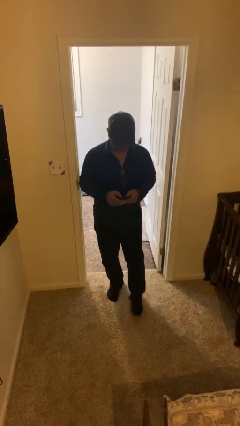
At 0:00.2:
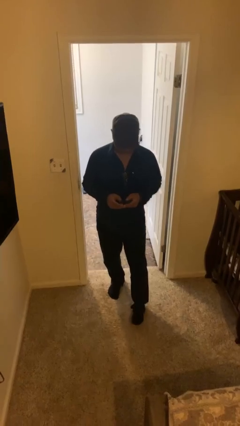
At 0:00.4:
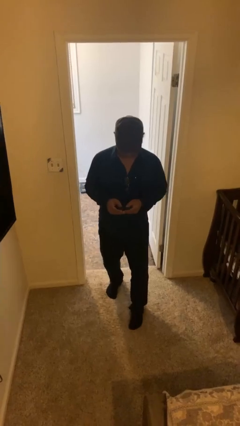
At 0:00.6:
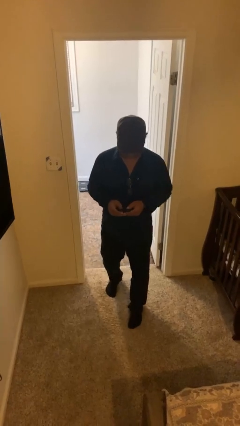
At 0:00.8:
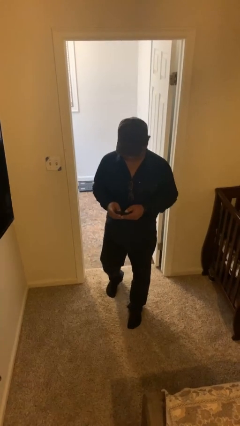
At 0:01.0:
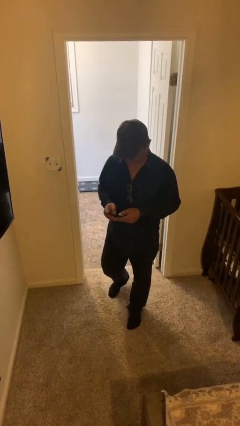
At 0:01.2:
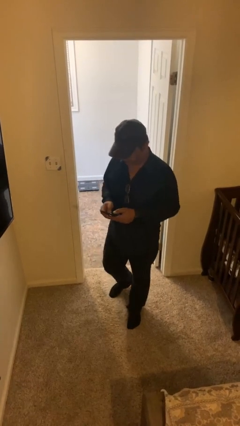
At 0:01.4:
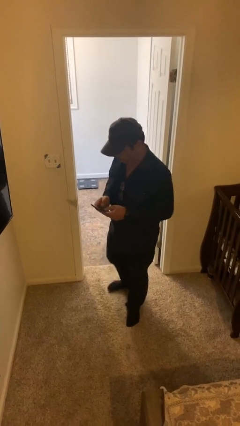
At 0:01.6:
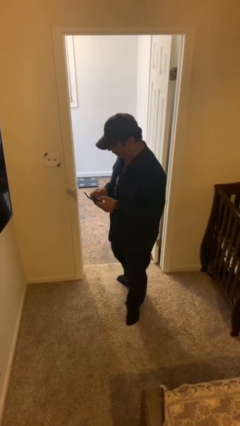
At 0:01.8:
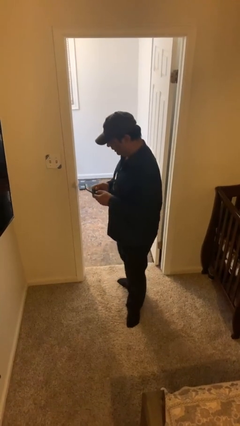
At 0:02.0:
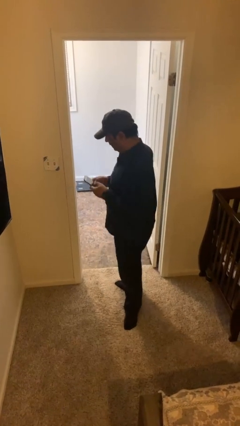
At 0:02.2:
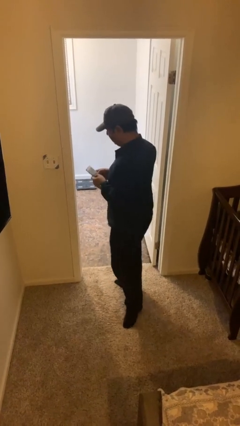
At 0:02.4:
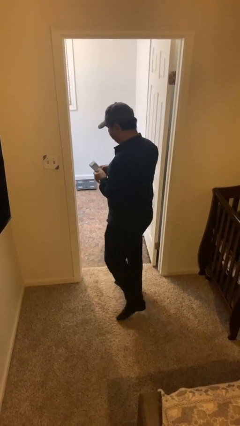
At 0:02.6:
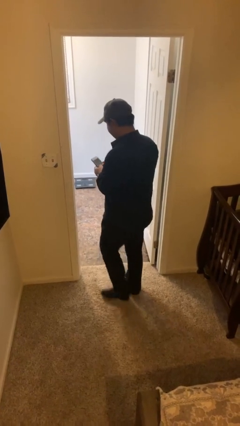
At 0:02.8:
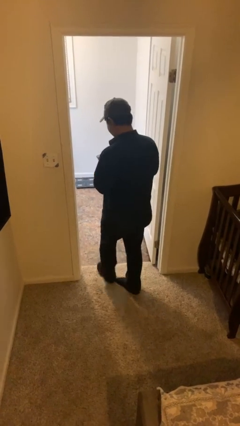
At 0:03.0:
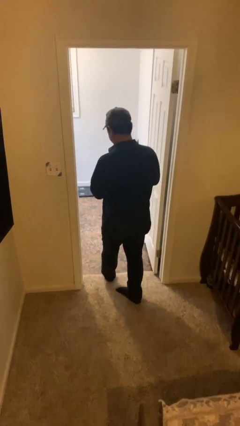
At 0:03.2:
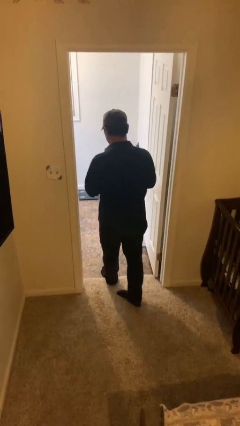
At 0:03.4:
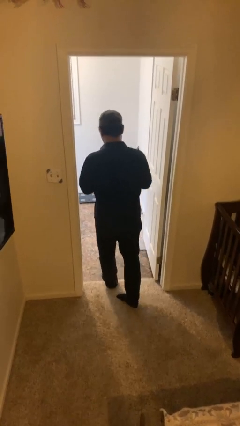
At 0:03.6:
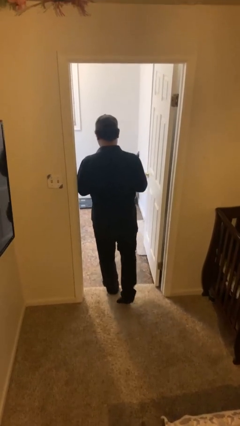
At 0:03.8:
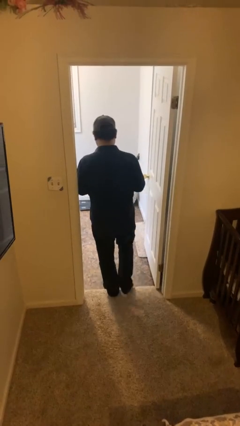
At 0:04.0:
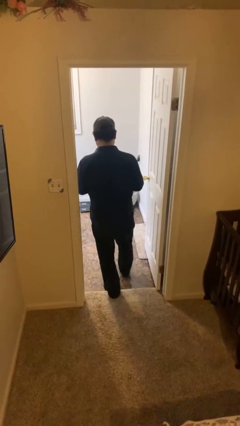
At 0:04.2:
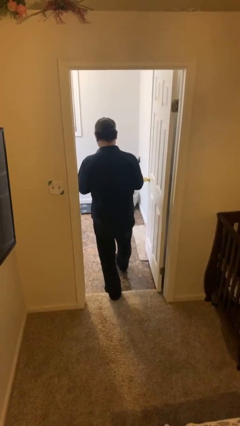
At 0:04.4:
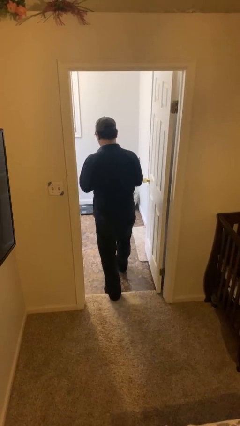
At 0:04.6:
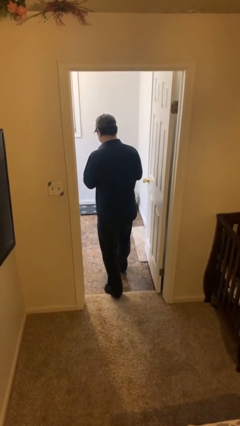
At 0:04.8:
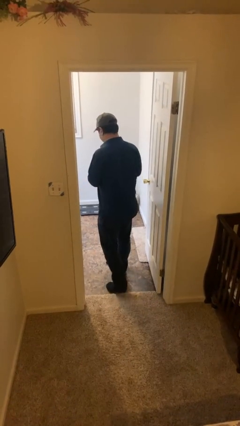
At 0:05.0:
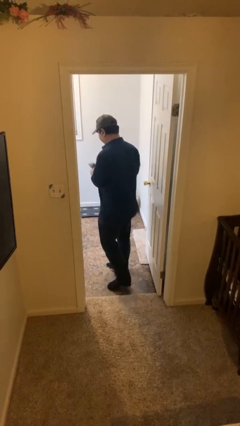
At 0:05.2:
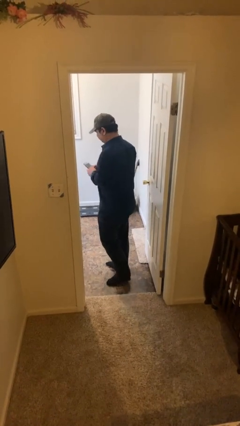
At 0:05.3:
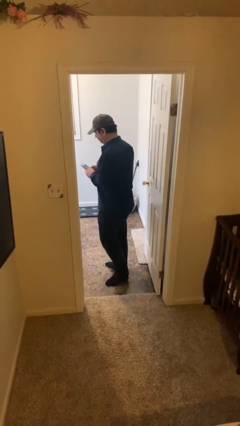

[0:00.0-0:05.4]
person exits scene through structure

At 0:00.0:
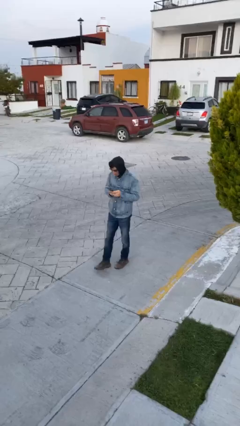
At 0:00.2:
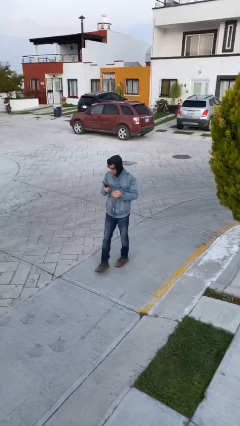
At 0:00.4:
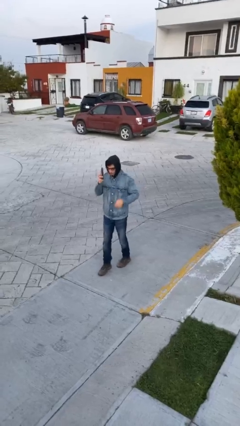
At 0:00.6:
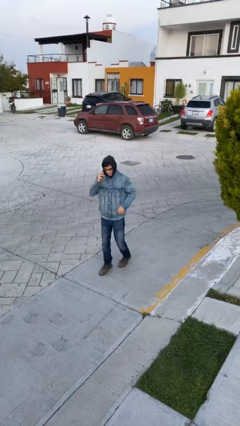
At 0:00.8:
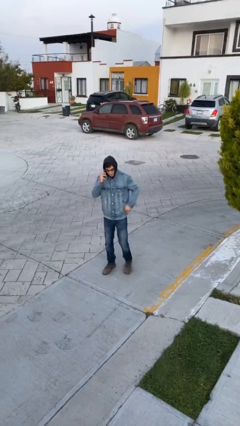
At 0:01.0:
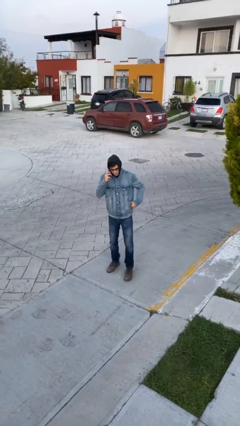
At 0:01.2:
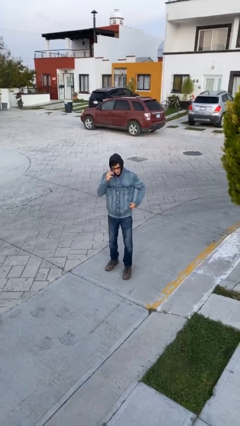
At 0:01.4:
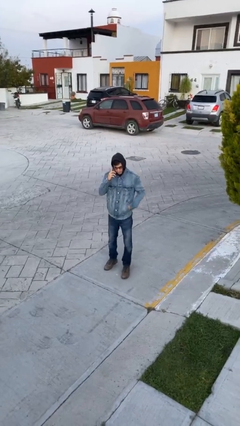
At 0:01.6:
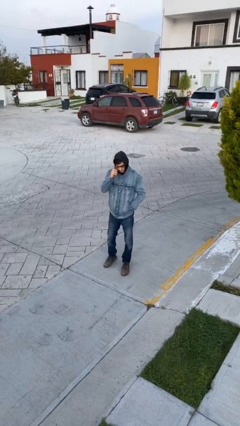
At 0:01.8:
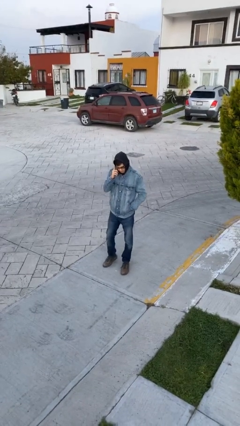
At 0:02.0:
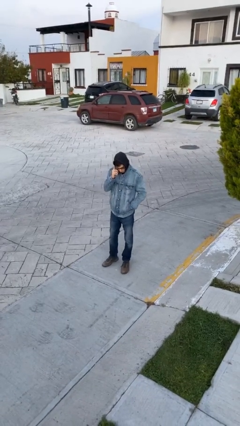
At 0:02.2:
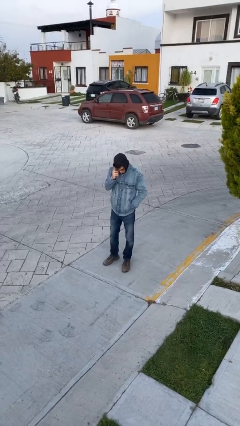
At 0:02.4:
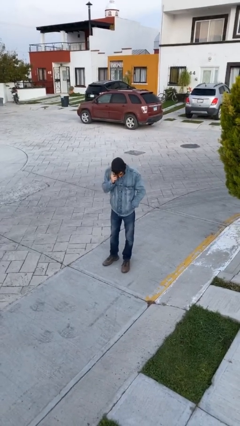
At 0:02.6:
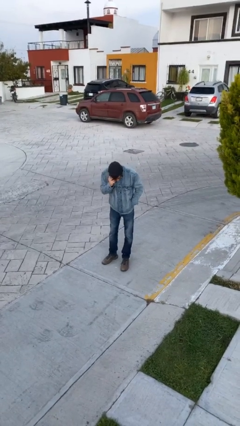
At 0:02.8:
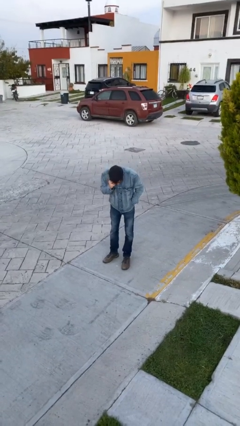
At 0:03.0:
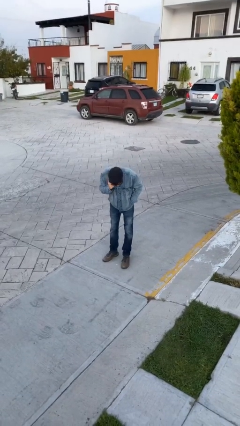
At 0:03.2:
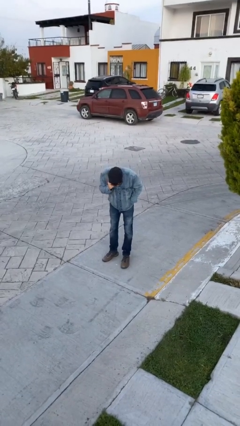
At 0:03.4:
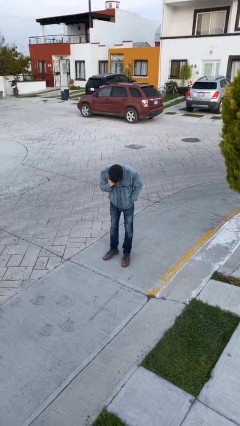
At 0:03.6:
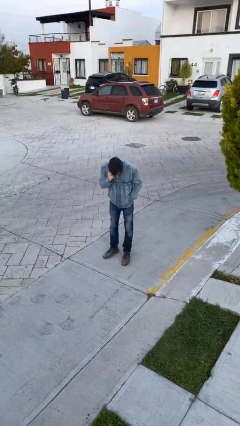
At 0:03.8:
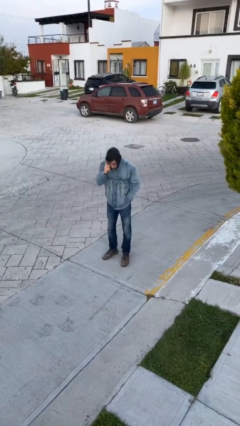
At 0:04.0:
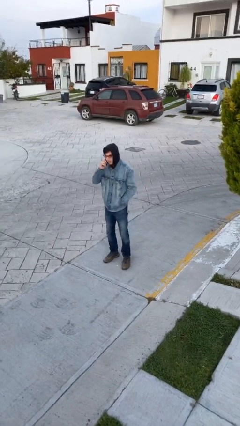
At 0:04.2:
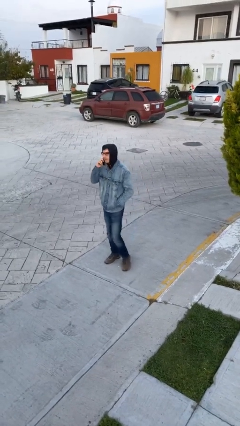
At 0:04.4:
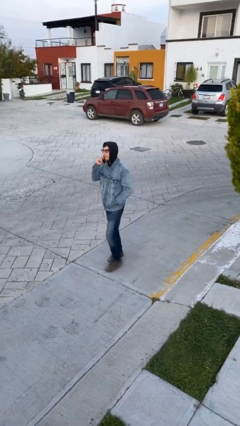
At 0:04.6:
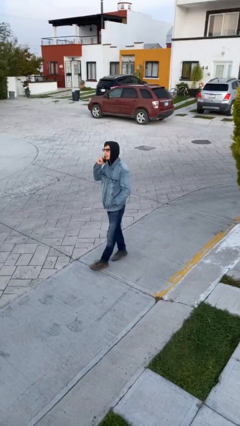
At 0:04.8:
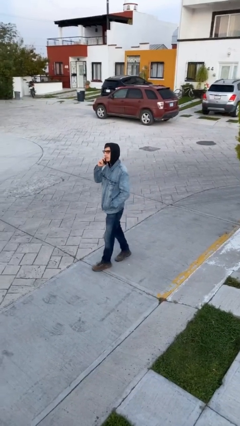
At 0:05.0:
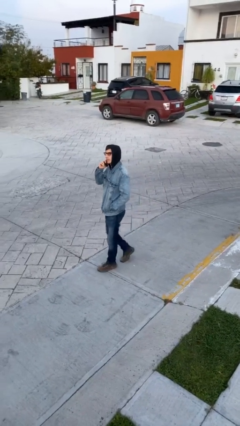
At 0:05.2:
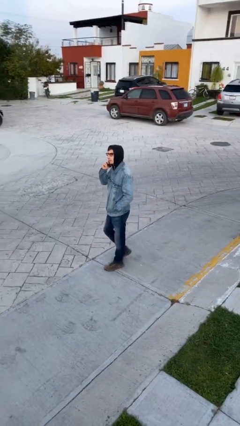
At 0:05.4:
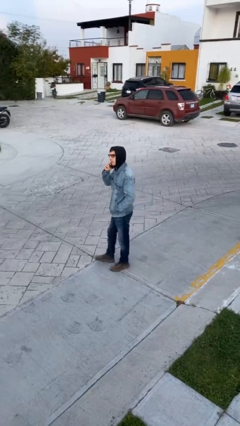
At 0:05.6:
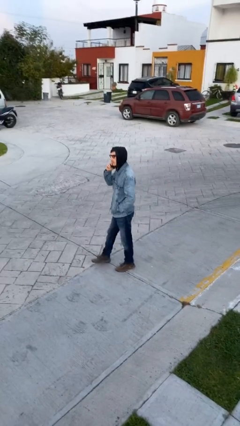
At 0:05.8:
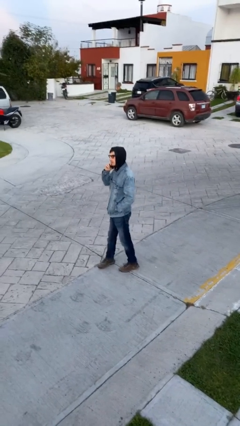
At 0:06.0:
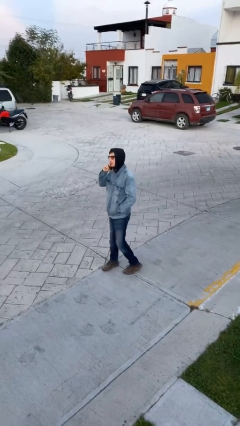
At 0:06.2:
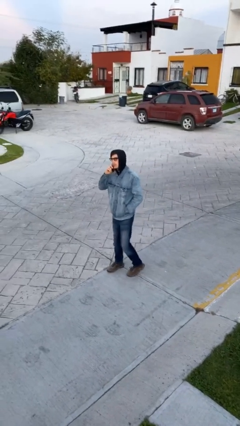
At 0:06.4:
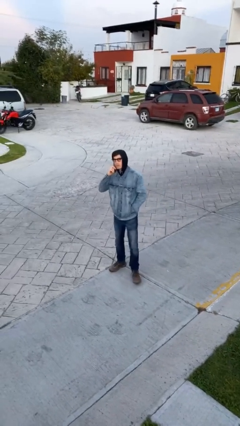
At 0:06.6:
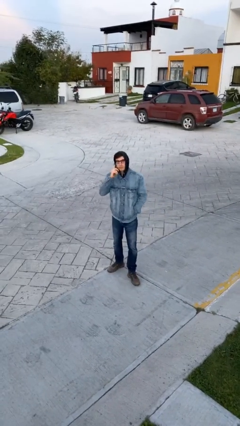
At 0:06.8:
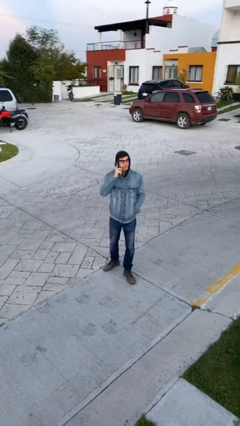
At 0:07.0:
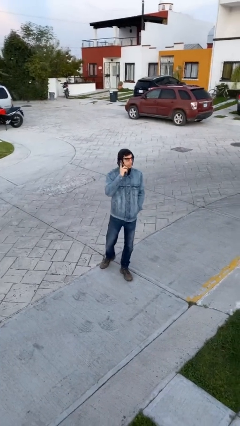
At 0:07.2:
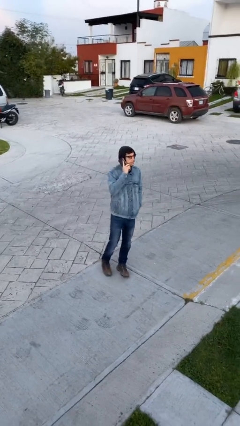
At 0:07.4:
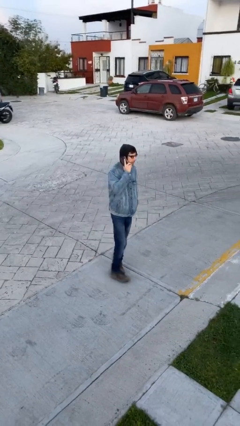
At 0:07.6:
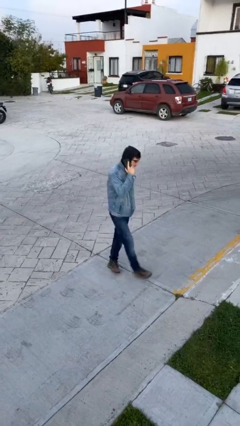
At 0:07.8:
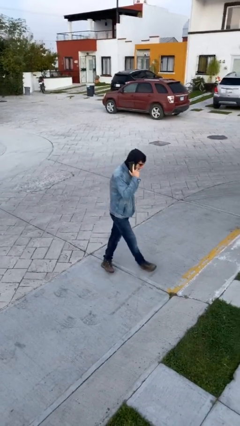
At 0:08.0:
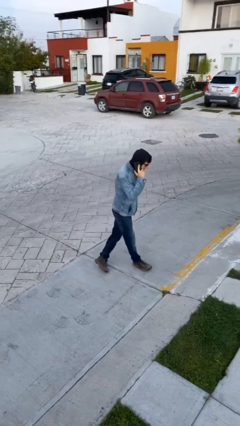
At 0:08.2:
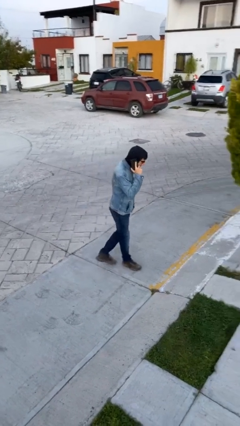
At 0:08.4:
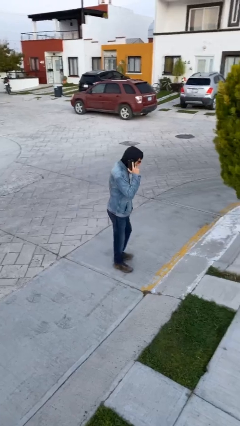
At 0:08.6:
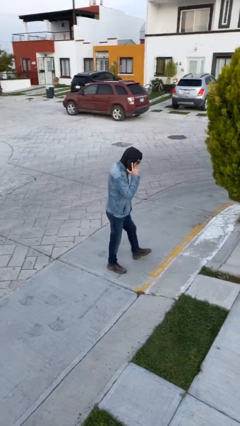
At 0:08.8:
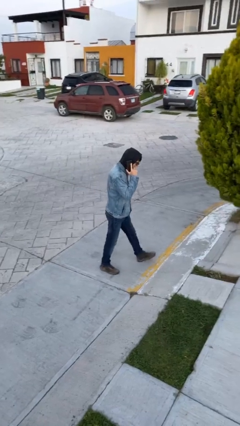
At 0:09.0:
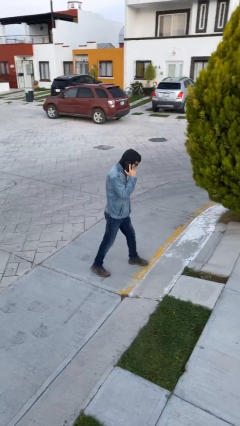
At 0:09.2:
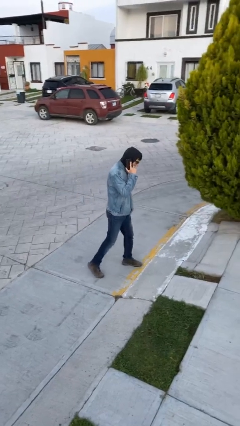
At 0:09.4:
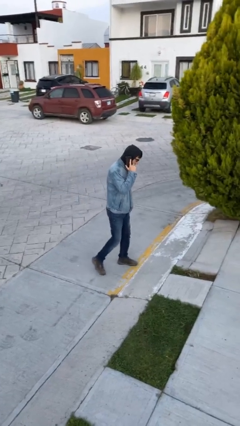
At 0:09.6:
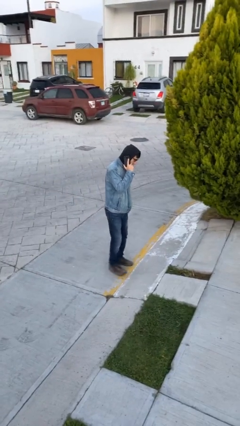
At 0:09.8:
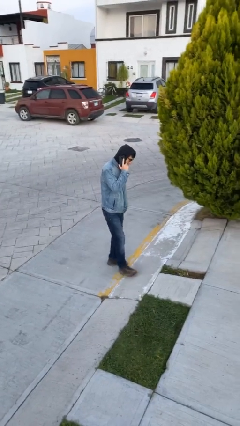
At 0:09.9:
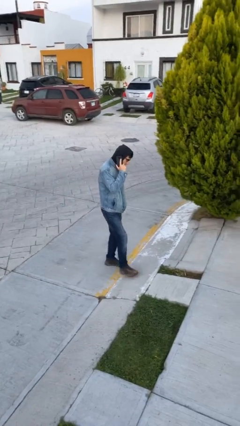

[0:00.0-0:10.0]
person talks on phone

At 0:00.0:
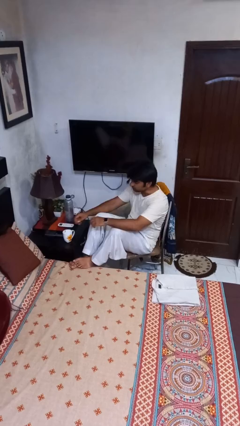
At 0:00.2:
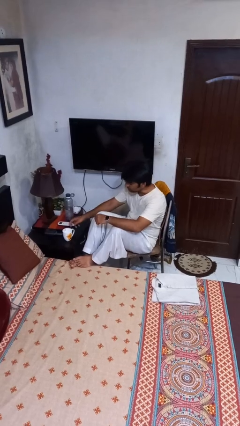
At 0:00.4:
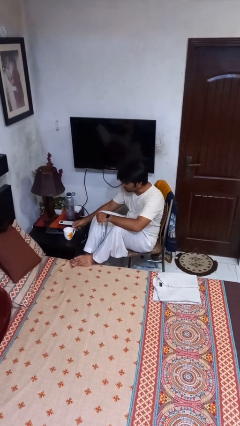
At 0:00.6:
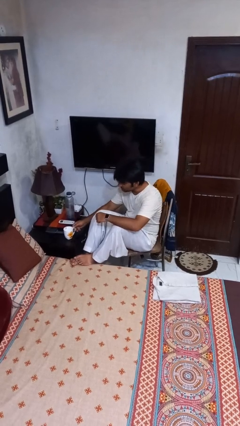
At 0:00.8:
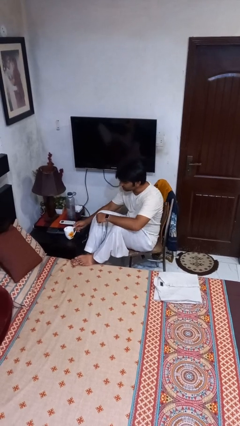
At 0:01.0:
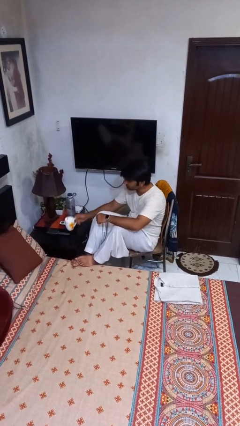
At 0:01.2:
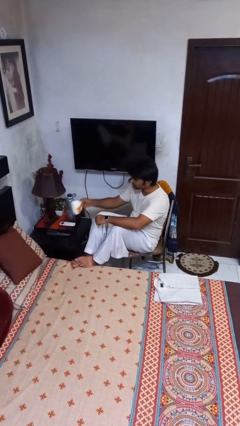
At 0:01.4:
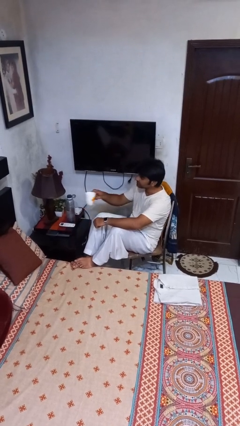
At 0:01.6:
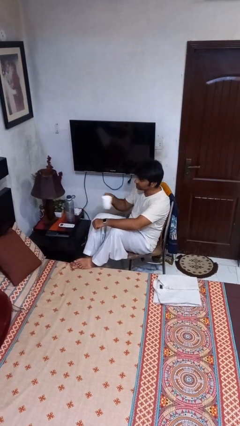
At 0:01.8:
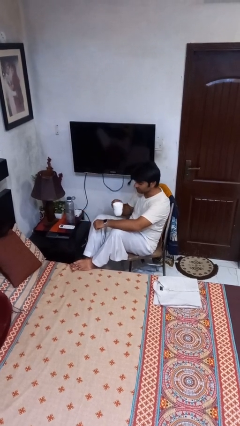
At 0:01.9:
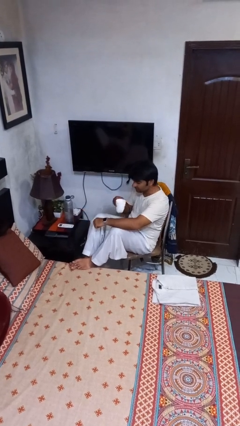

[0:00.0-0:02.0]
person picks up object from table

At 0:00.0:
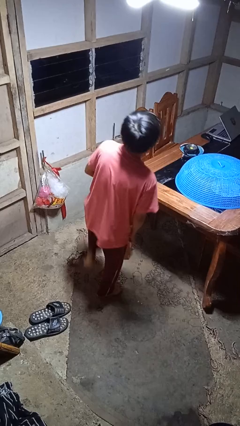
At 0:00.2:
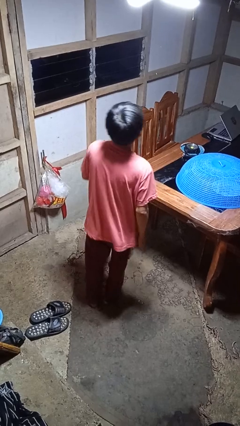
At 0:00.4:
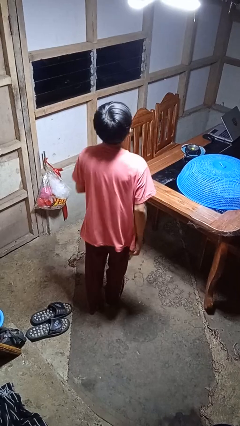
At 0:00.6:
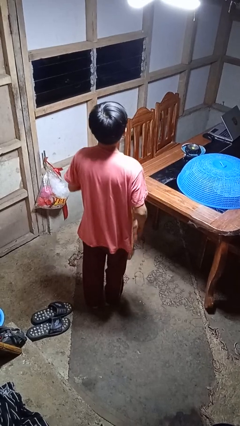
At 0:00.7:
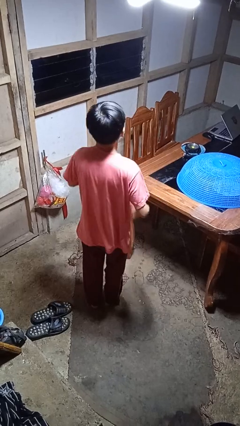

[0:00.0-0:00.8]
person karate chop
